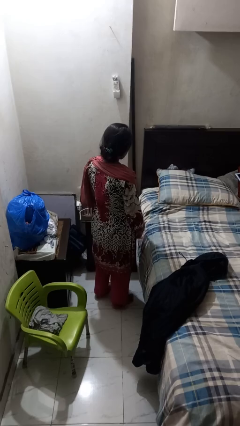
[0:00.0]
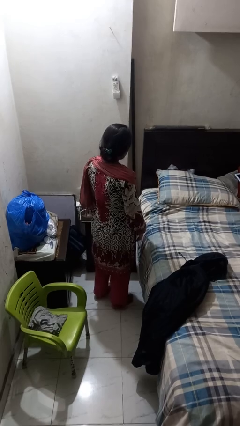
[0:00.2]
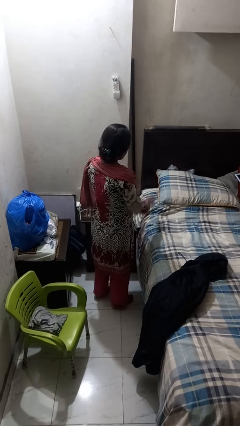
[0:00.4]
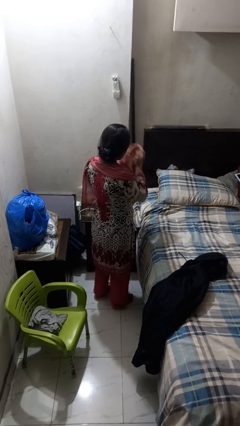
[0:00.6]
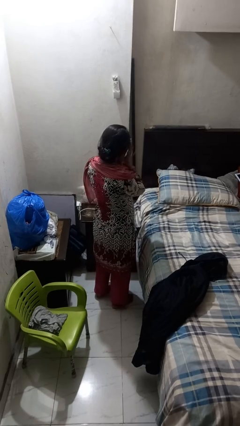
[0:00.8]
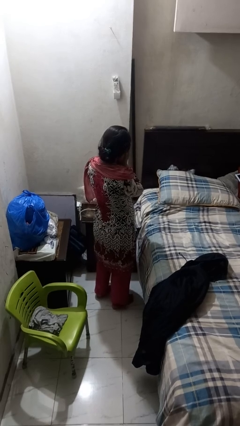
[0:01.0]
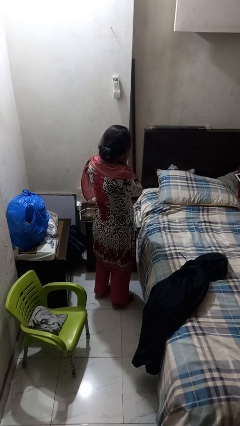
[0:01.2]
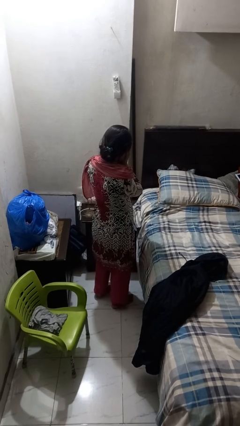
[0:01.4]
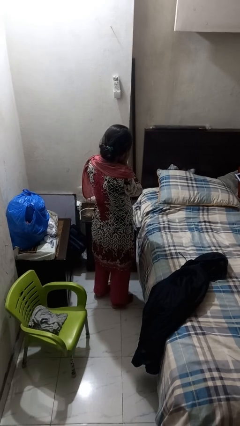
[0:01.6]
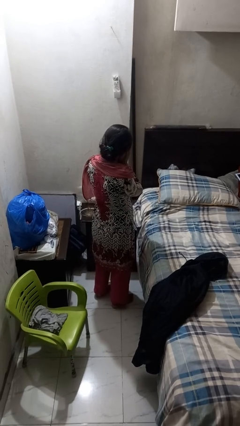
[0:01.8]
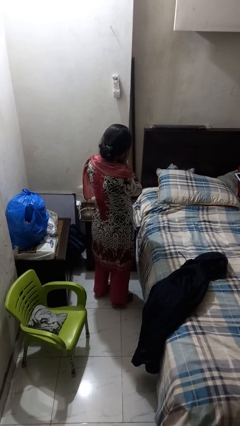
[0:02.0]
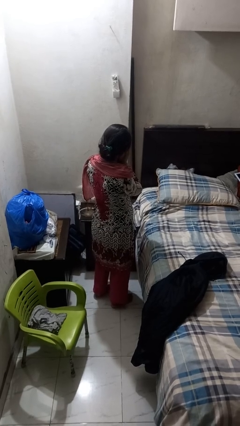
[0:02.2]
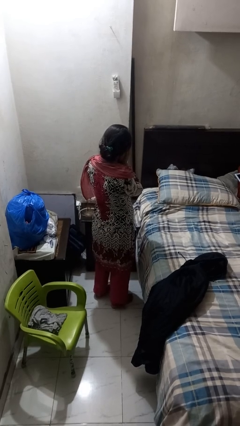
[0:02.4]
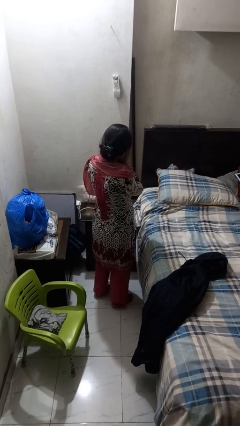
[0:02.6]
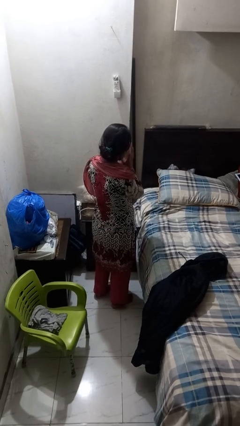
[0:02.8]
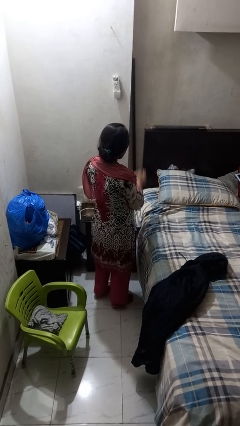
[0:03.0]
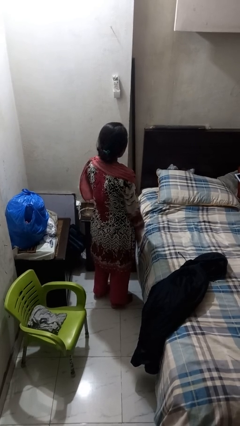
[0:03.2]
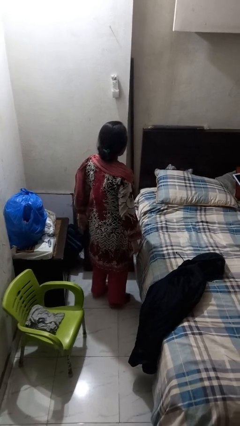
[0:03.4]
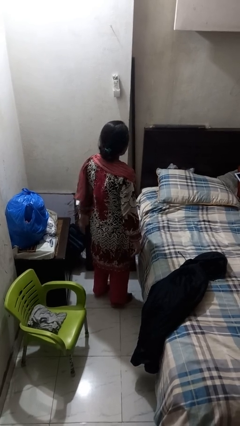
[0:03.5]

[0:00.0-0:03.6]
person covers face with hands

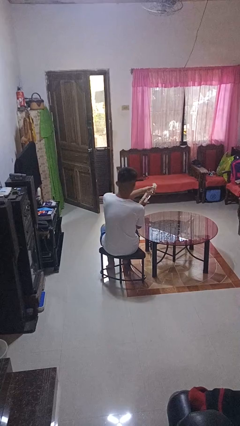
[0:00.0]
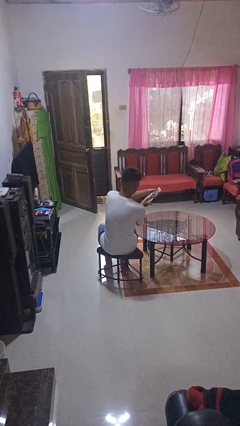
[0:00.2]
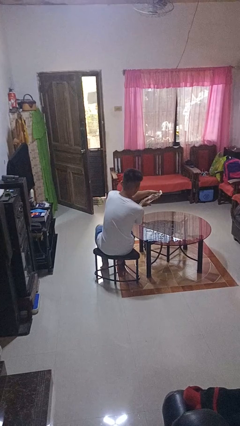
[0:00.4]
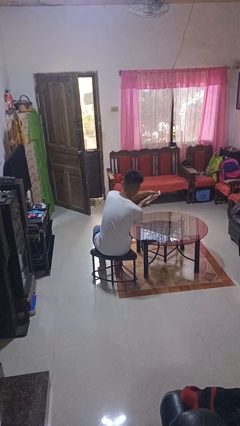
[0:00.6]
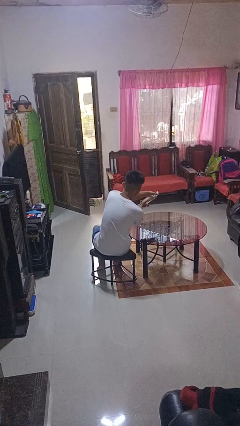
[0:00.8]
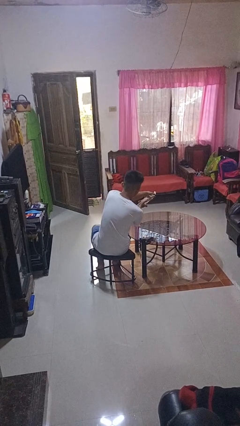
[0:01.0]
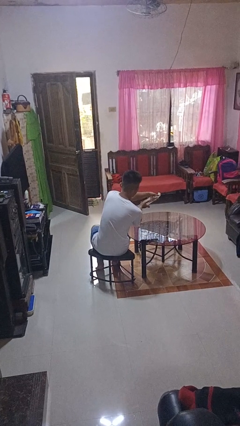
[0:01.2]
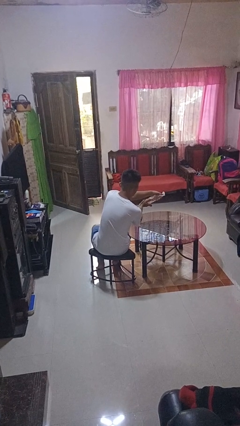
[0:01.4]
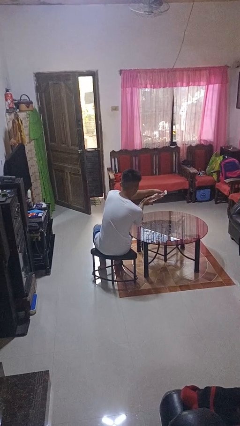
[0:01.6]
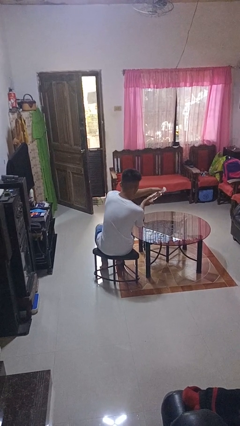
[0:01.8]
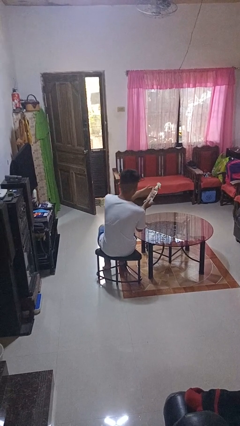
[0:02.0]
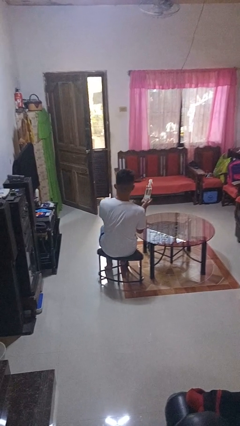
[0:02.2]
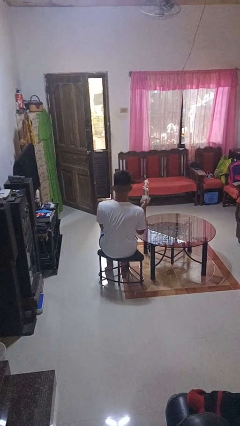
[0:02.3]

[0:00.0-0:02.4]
person sprays from bottle

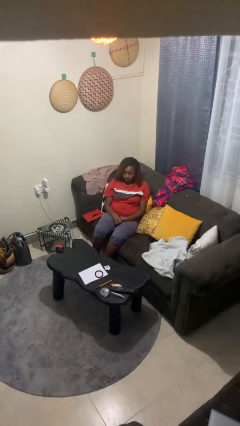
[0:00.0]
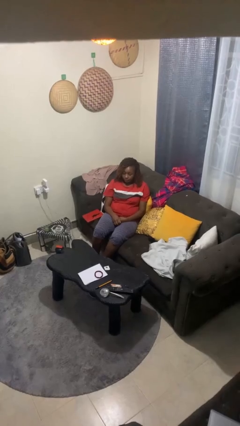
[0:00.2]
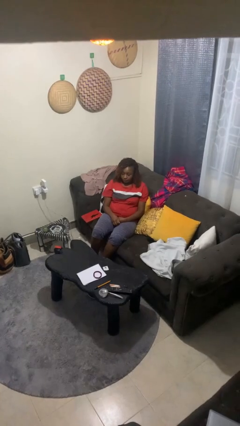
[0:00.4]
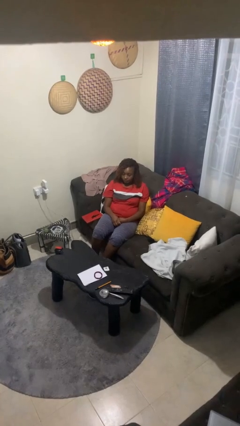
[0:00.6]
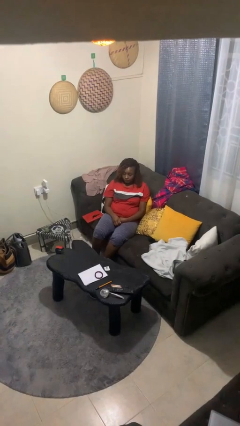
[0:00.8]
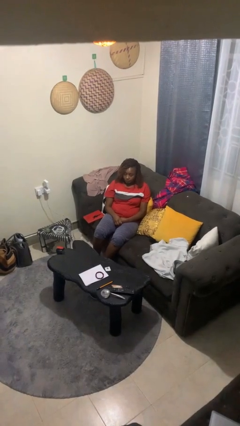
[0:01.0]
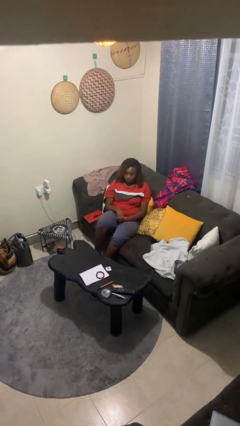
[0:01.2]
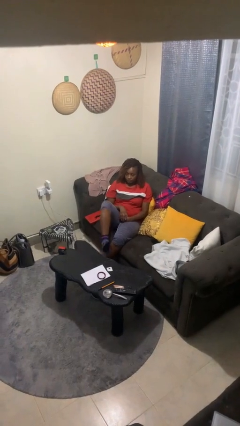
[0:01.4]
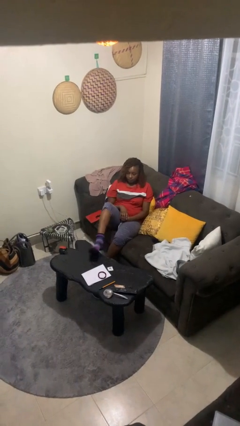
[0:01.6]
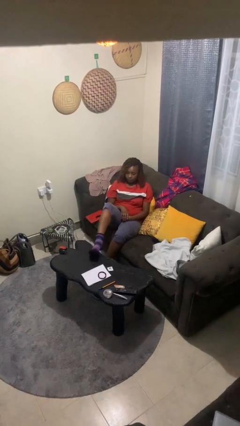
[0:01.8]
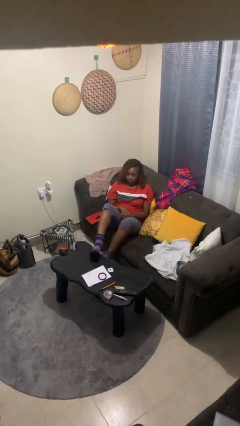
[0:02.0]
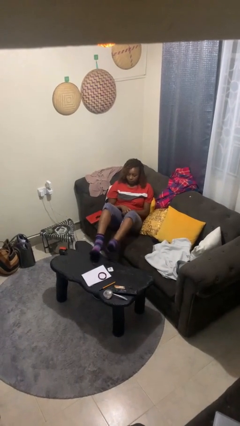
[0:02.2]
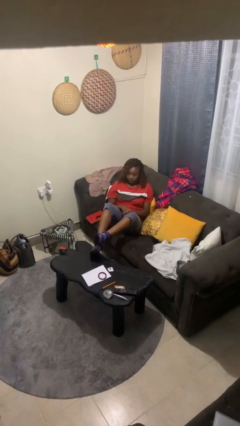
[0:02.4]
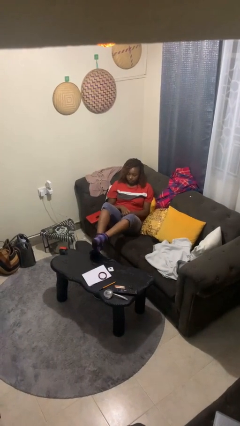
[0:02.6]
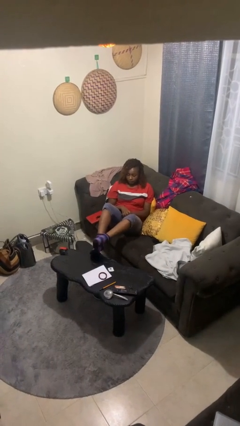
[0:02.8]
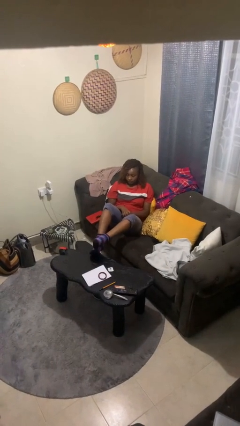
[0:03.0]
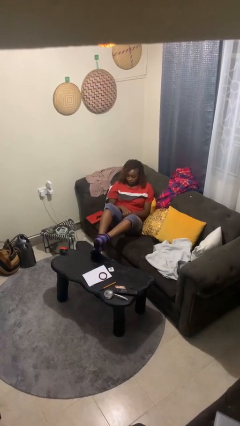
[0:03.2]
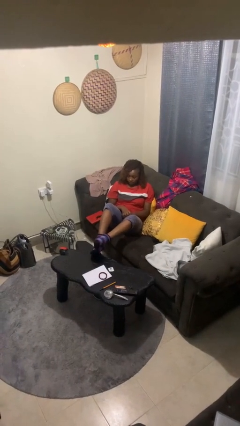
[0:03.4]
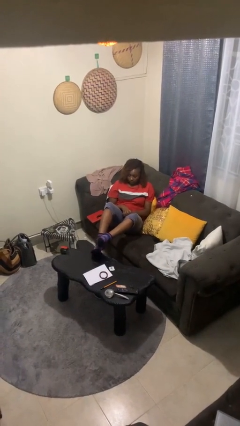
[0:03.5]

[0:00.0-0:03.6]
person puts feet up

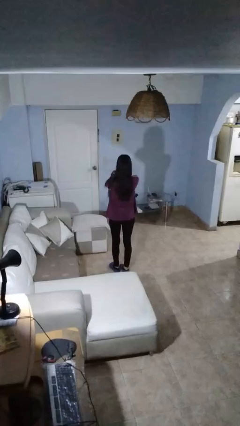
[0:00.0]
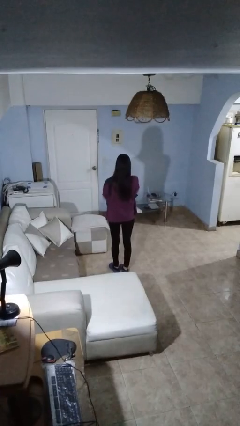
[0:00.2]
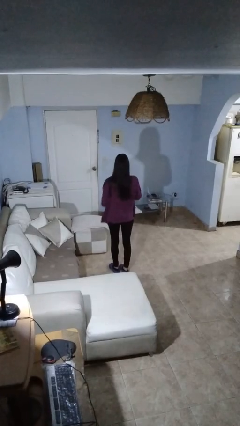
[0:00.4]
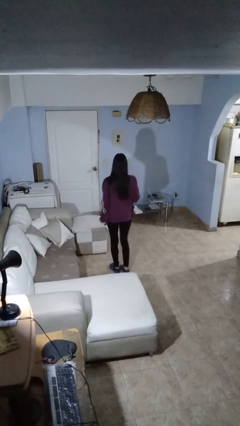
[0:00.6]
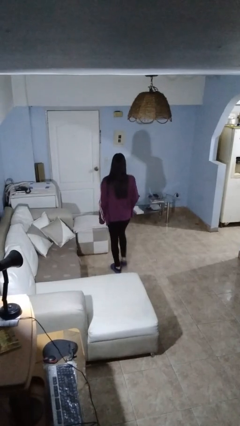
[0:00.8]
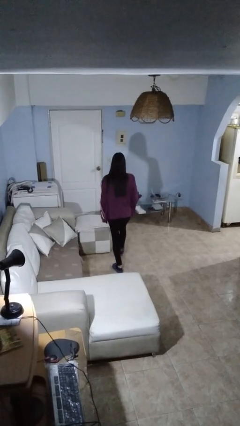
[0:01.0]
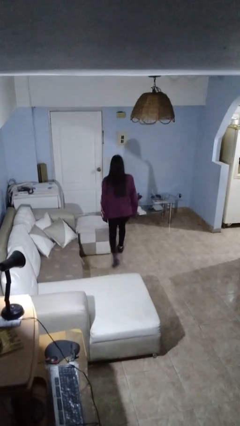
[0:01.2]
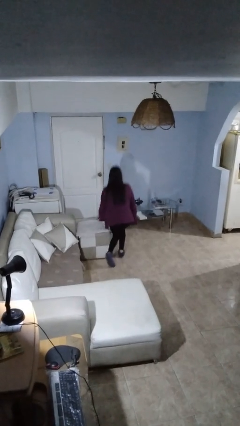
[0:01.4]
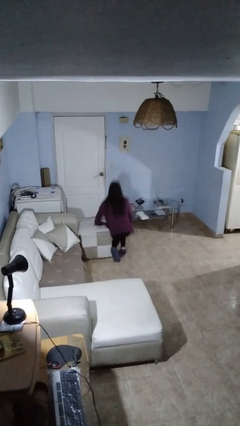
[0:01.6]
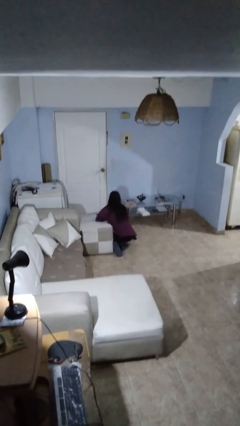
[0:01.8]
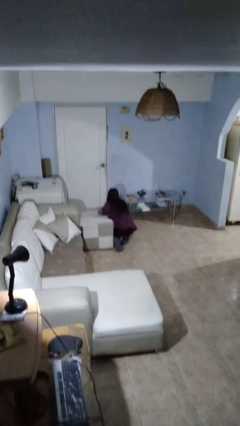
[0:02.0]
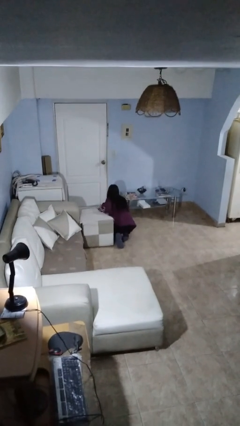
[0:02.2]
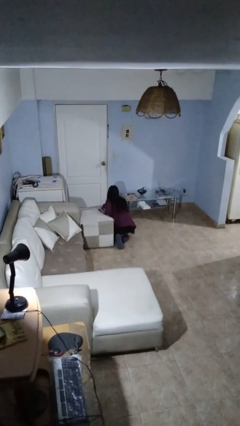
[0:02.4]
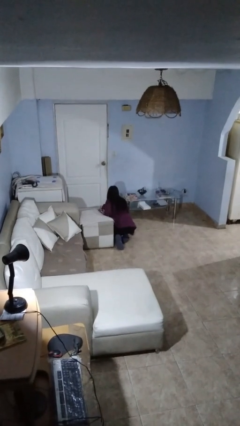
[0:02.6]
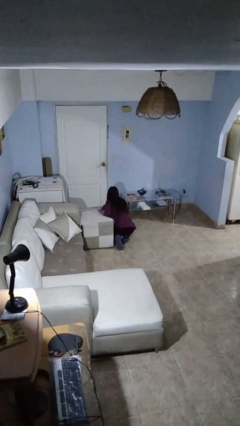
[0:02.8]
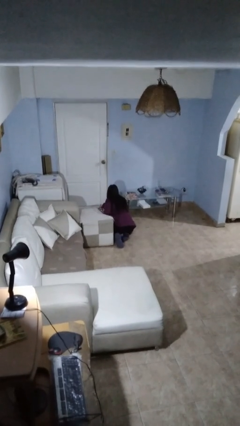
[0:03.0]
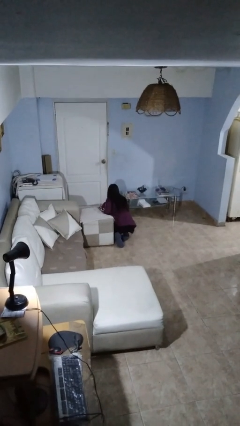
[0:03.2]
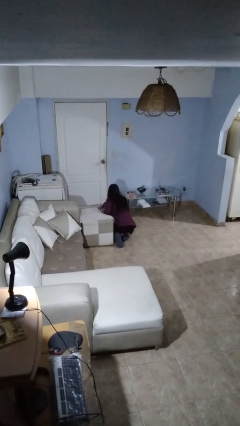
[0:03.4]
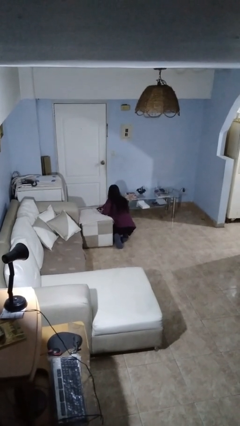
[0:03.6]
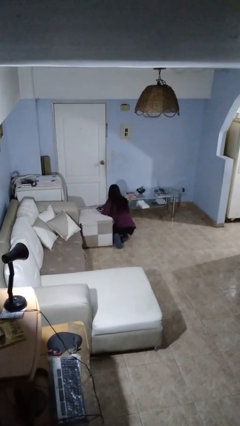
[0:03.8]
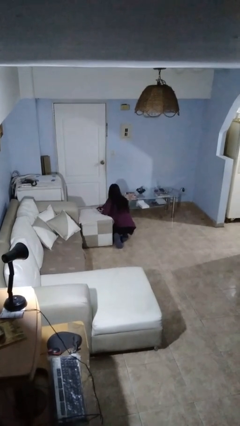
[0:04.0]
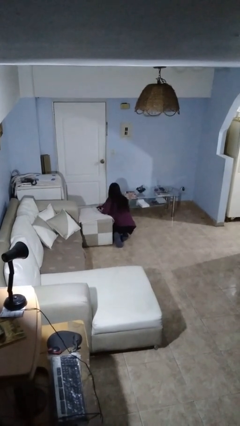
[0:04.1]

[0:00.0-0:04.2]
person trips on object on floor

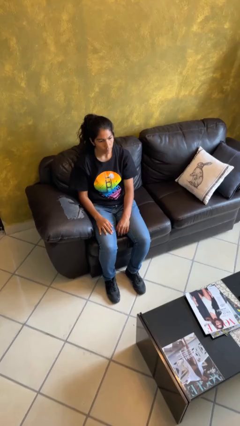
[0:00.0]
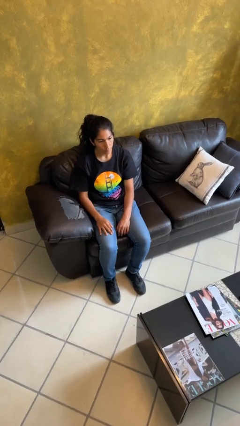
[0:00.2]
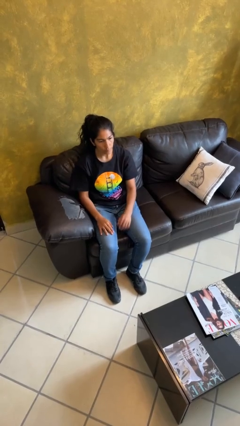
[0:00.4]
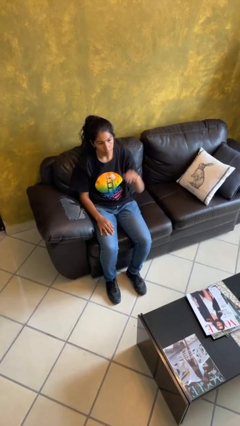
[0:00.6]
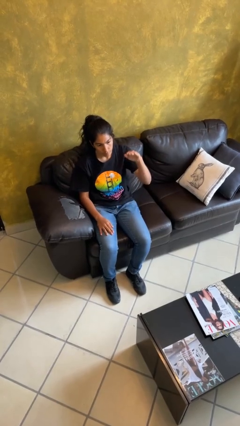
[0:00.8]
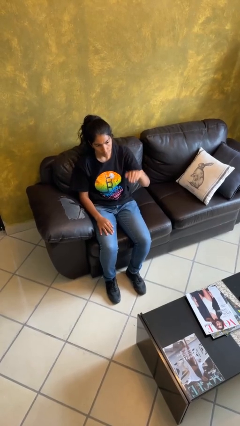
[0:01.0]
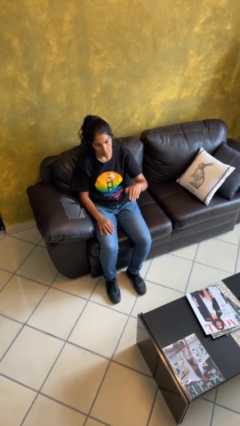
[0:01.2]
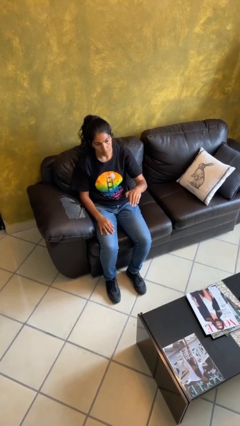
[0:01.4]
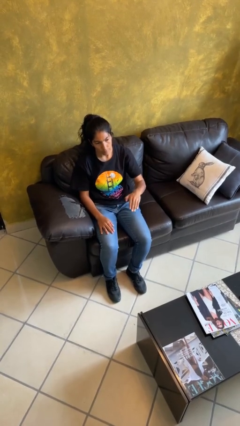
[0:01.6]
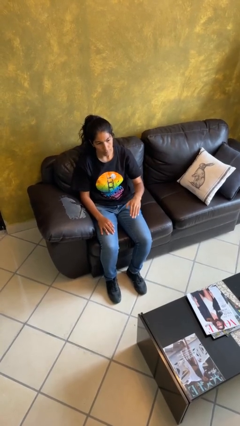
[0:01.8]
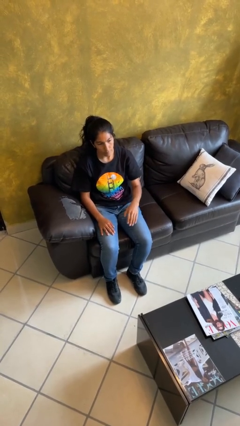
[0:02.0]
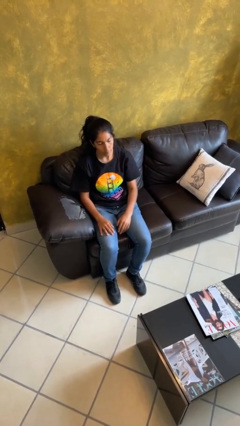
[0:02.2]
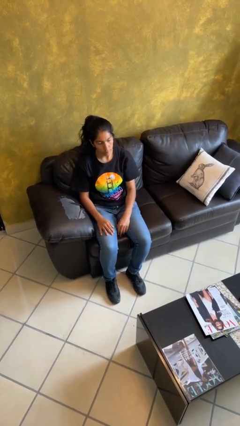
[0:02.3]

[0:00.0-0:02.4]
person gestures swipe down

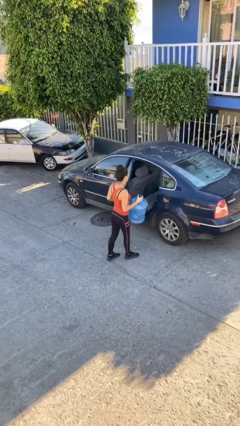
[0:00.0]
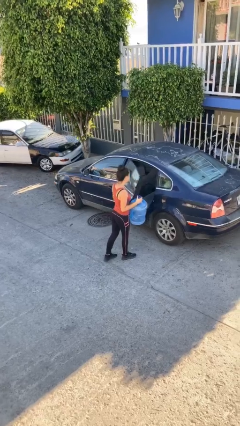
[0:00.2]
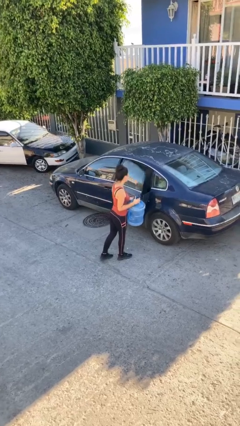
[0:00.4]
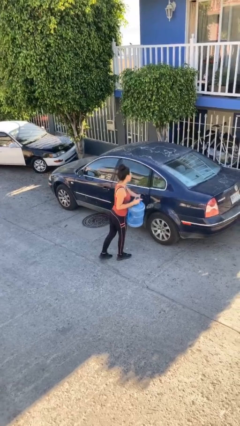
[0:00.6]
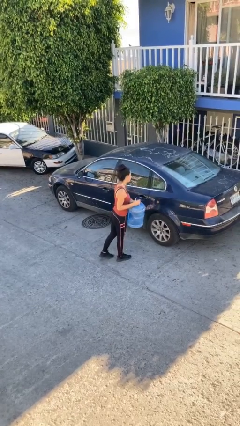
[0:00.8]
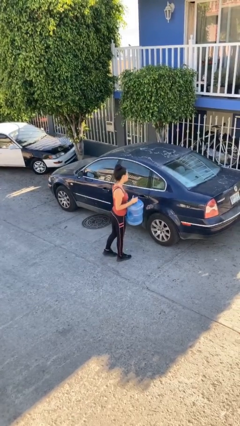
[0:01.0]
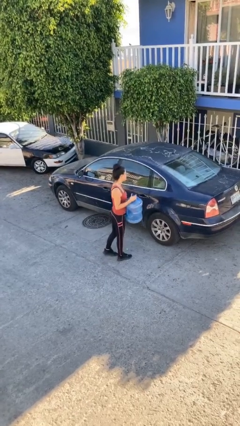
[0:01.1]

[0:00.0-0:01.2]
person closes car door
